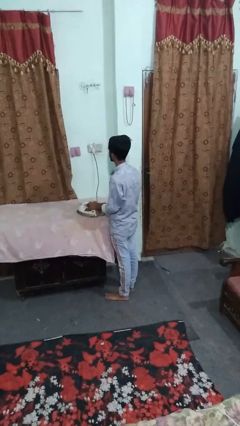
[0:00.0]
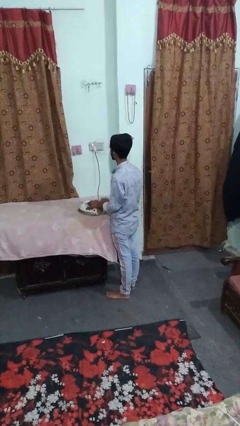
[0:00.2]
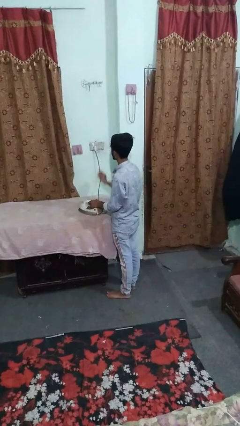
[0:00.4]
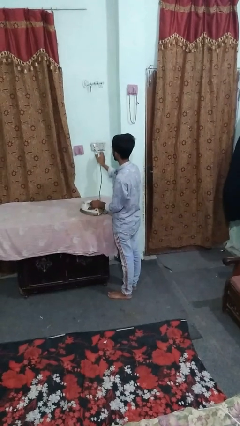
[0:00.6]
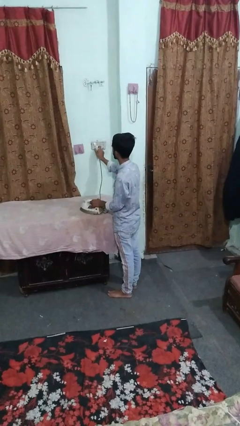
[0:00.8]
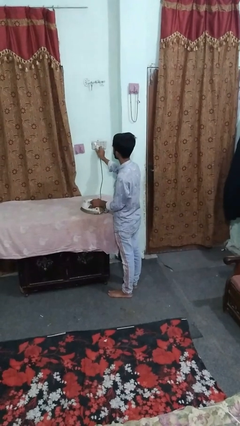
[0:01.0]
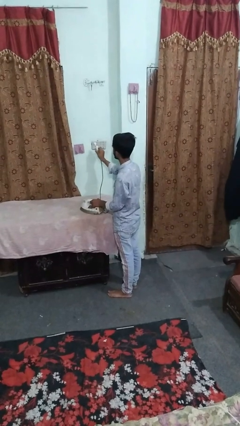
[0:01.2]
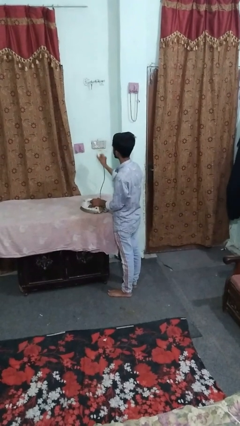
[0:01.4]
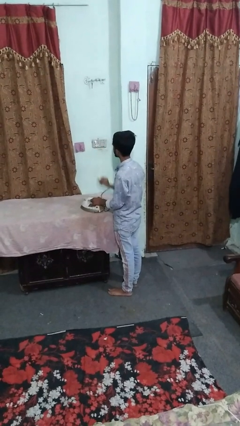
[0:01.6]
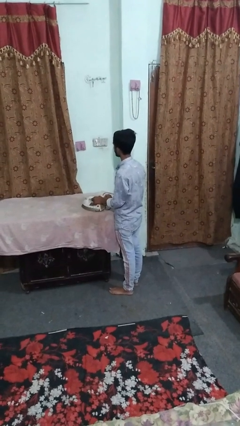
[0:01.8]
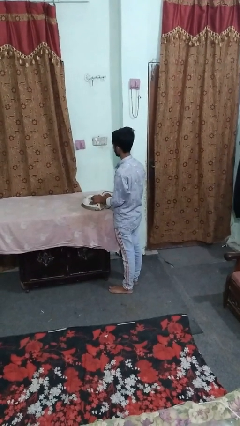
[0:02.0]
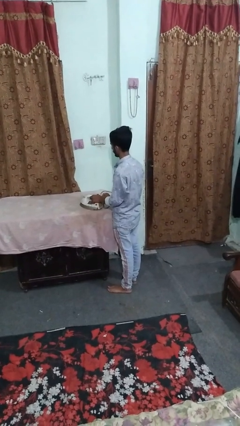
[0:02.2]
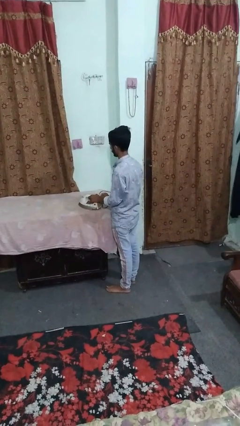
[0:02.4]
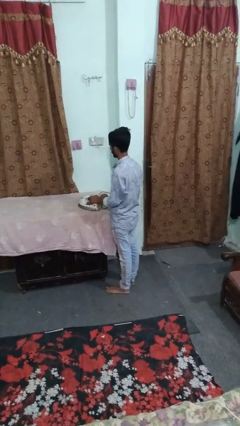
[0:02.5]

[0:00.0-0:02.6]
person unplugs from electrical socket

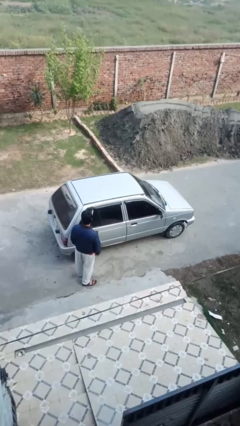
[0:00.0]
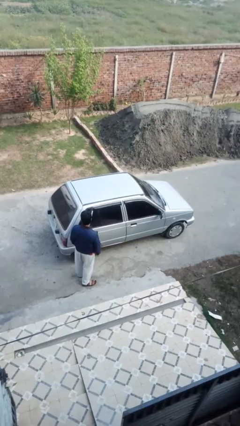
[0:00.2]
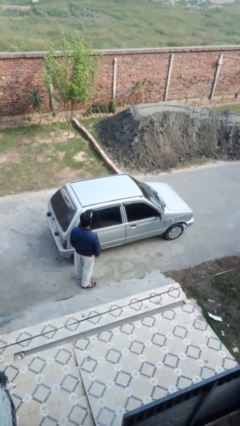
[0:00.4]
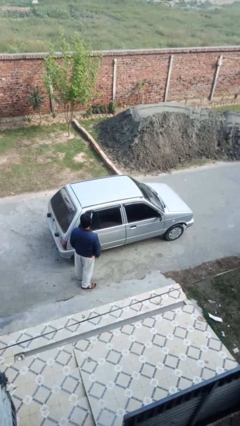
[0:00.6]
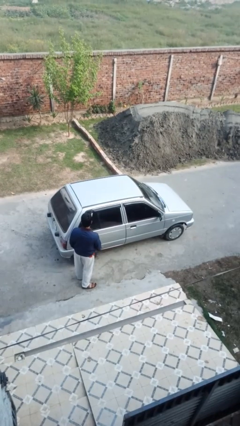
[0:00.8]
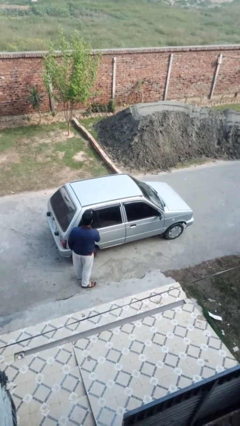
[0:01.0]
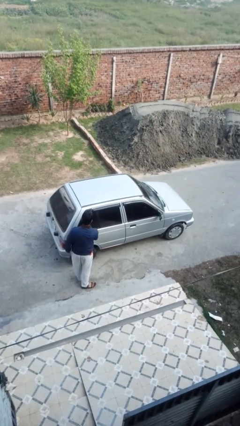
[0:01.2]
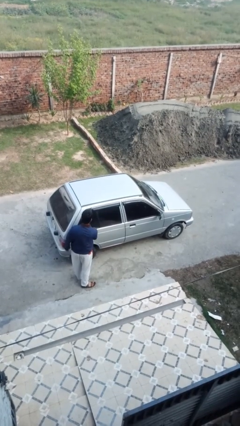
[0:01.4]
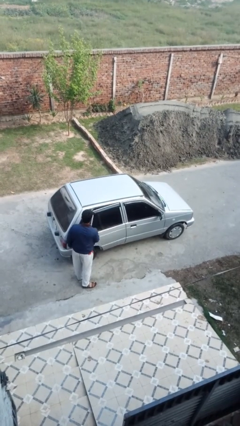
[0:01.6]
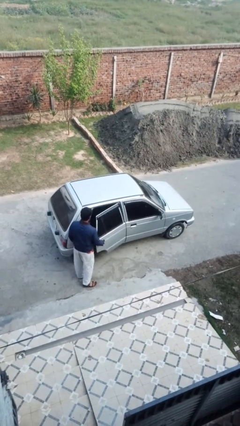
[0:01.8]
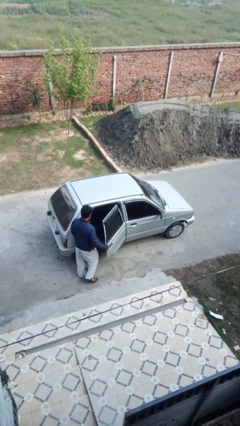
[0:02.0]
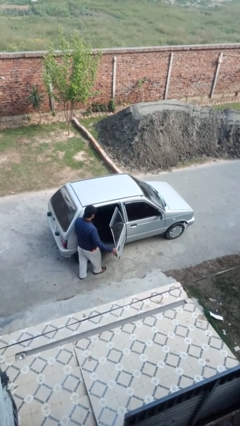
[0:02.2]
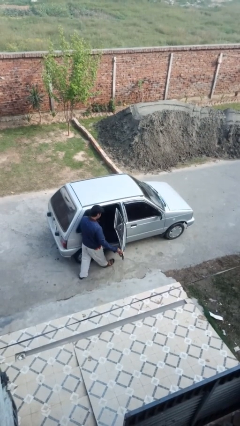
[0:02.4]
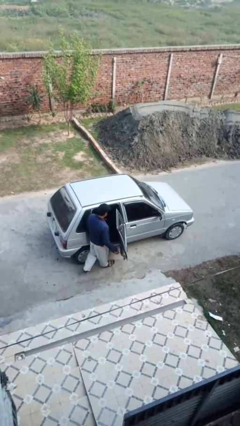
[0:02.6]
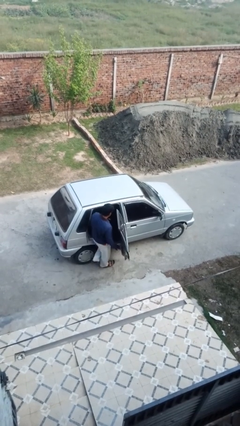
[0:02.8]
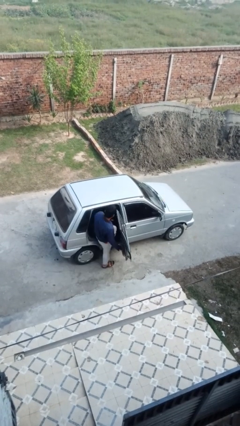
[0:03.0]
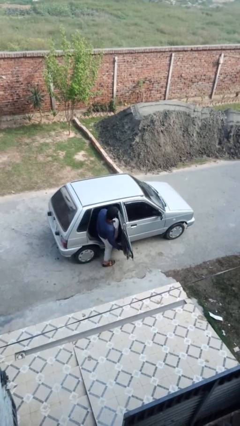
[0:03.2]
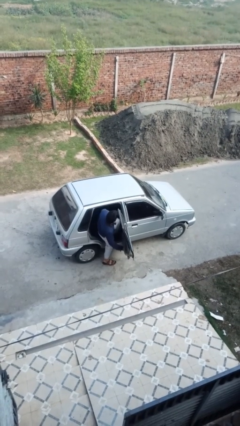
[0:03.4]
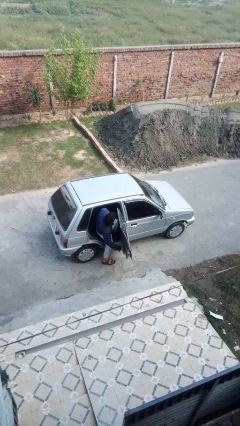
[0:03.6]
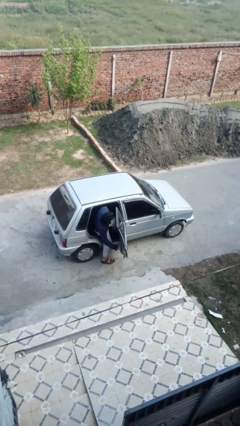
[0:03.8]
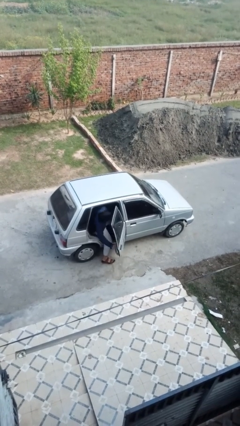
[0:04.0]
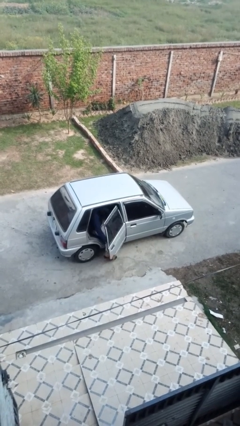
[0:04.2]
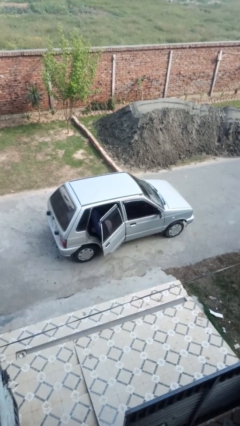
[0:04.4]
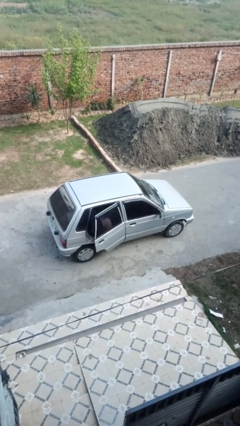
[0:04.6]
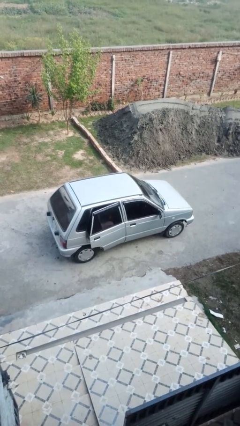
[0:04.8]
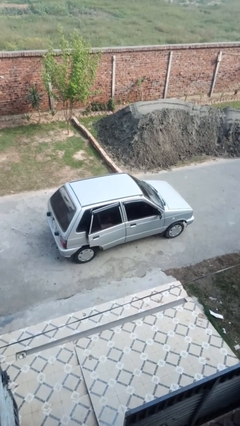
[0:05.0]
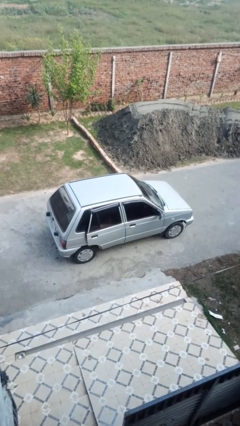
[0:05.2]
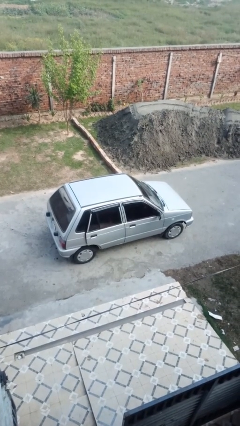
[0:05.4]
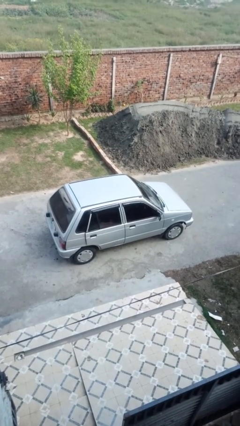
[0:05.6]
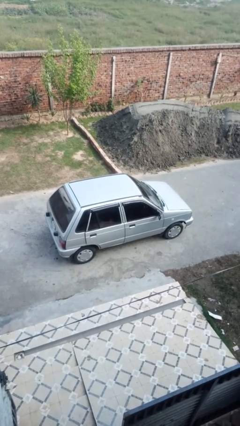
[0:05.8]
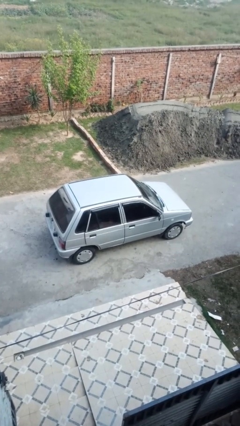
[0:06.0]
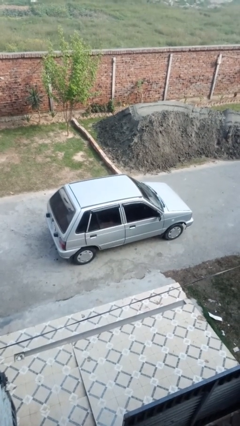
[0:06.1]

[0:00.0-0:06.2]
car picks up person

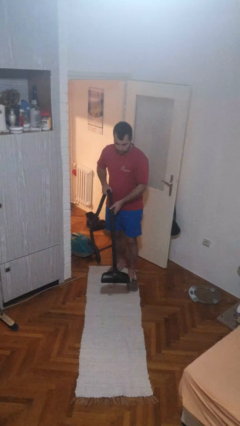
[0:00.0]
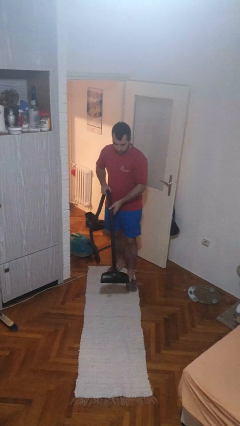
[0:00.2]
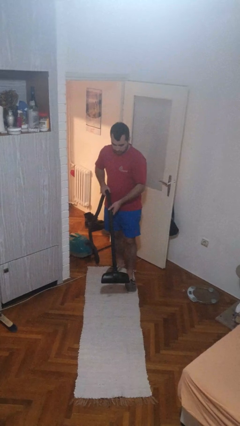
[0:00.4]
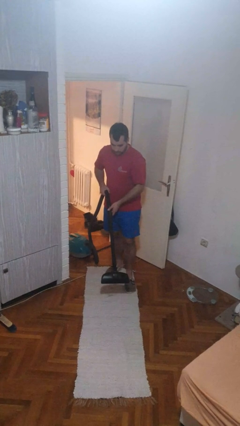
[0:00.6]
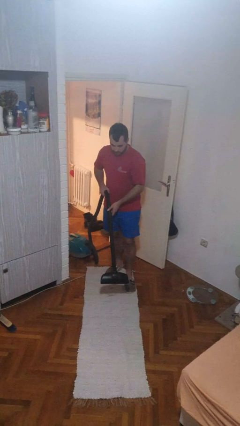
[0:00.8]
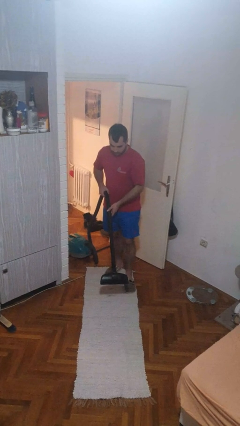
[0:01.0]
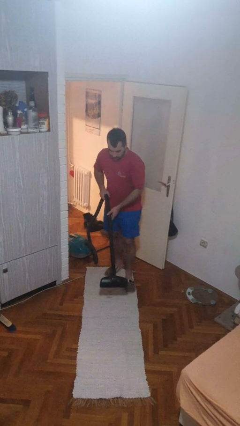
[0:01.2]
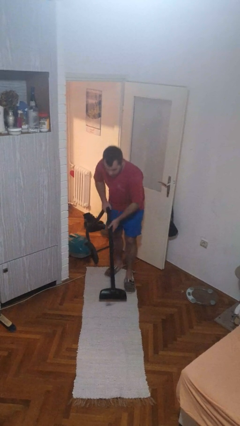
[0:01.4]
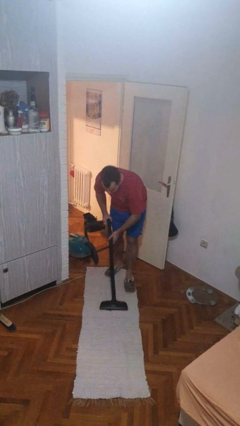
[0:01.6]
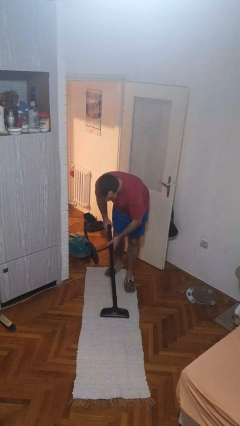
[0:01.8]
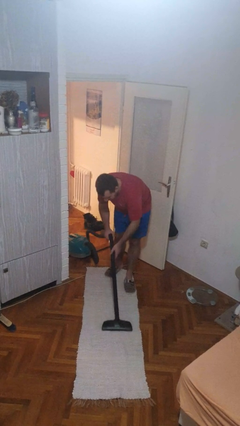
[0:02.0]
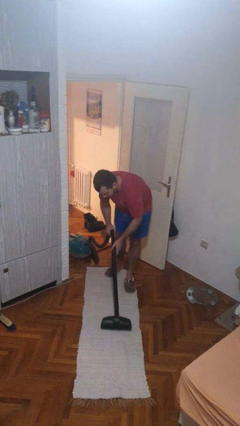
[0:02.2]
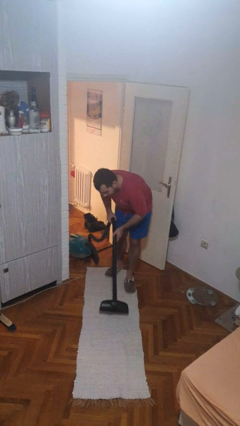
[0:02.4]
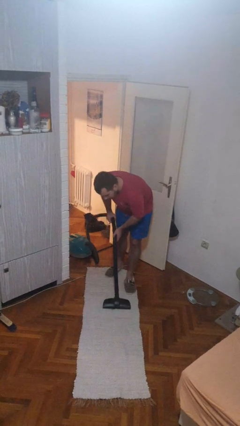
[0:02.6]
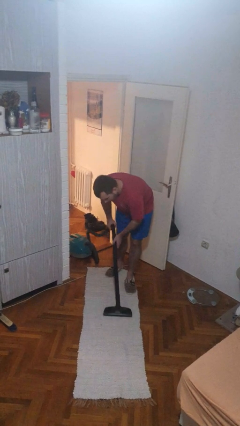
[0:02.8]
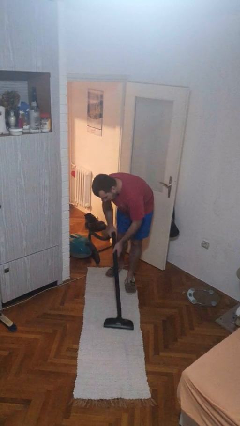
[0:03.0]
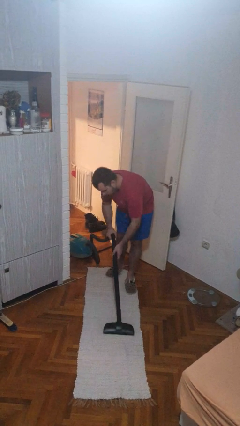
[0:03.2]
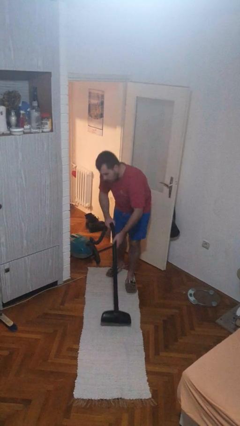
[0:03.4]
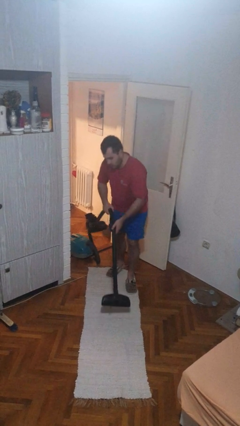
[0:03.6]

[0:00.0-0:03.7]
person vacuums carpet

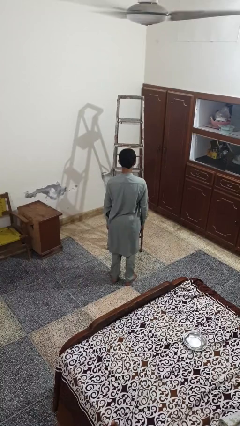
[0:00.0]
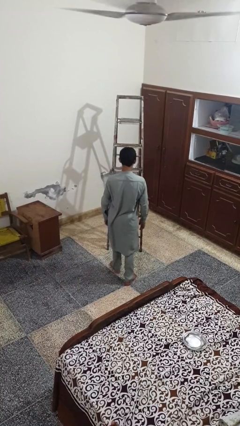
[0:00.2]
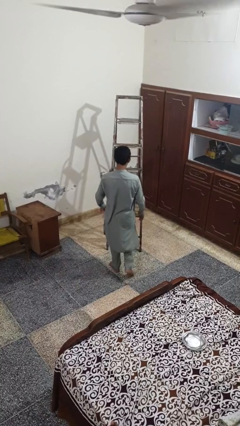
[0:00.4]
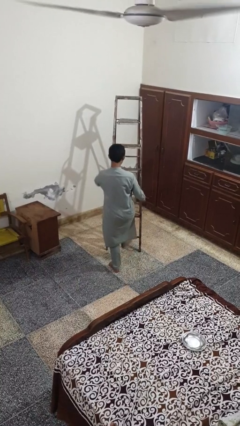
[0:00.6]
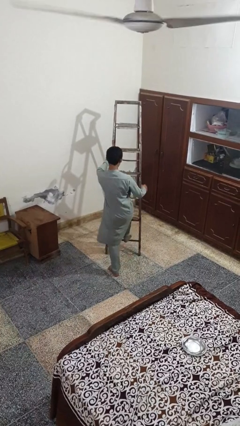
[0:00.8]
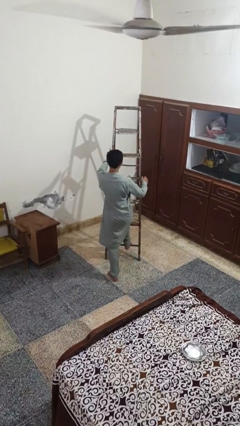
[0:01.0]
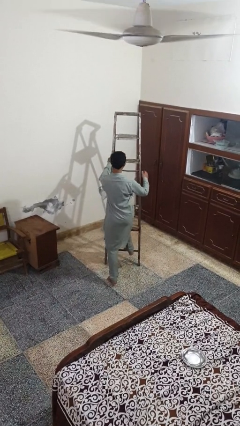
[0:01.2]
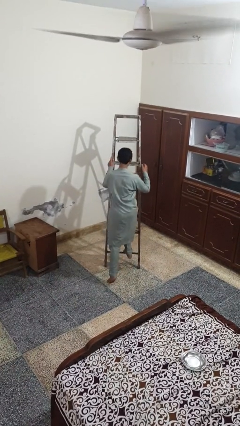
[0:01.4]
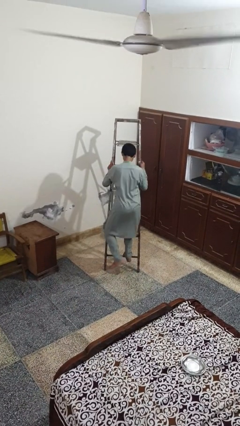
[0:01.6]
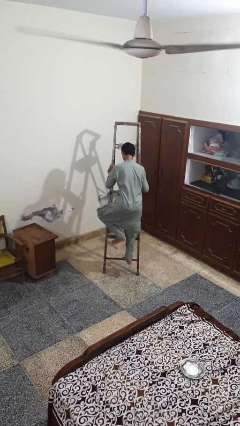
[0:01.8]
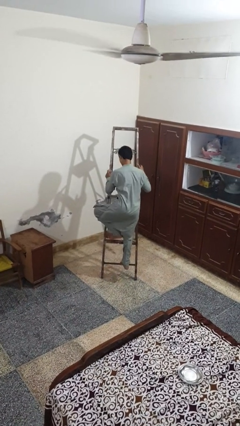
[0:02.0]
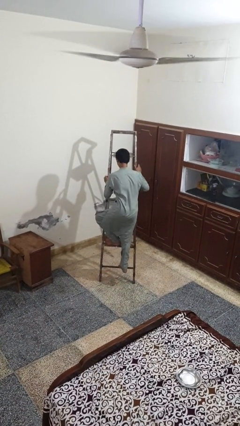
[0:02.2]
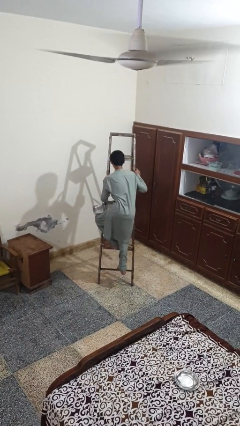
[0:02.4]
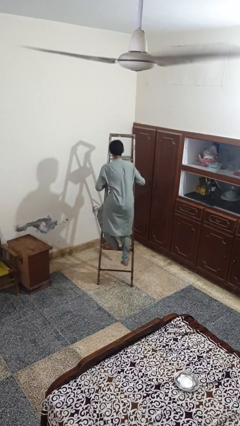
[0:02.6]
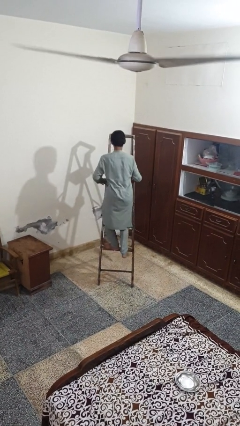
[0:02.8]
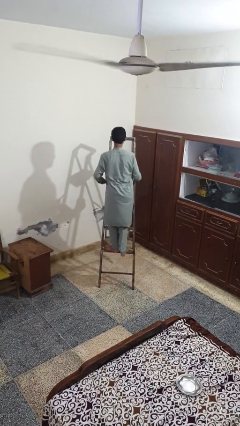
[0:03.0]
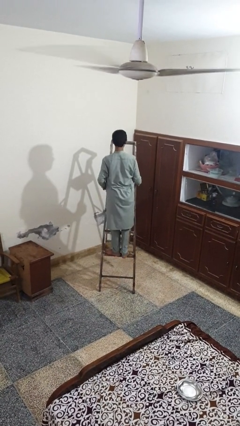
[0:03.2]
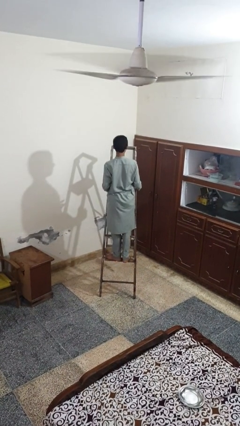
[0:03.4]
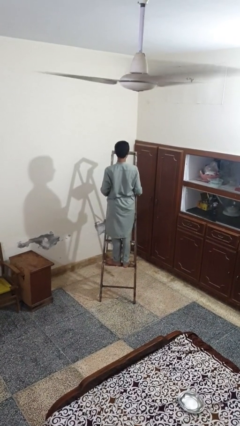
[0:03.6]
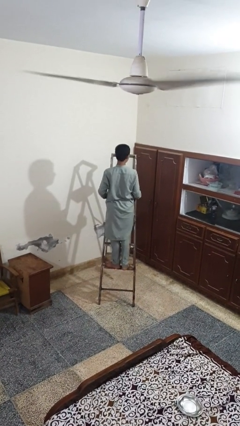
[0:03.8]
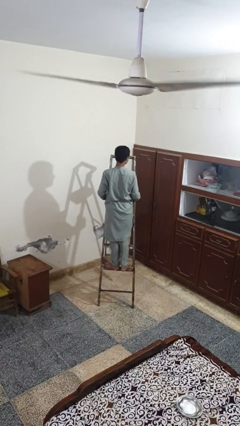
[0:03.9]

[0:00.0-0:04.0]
person climbs up ladder

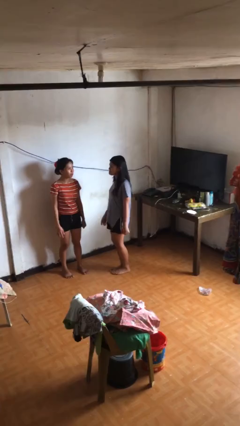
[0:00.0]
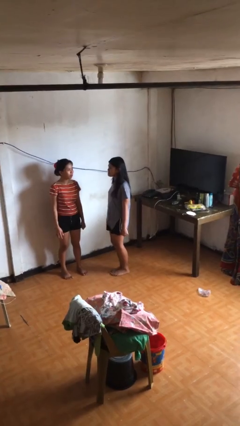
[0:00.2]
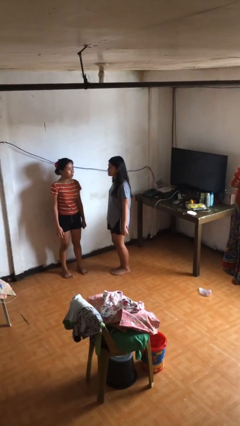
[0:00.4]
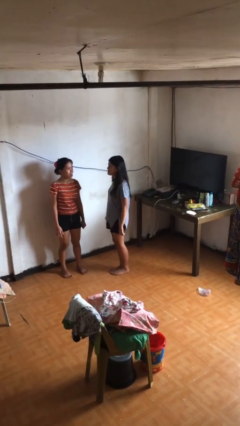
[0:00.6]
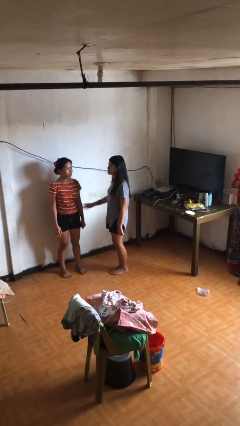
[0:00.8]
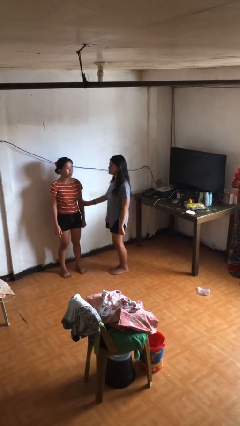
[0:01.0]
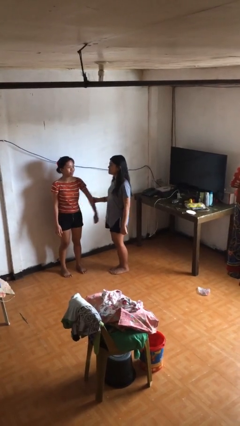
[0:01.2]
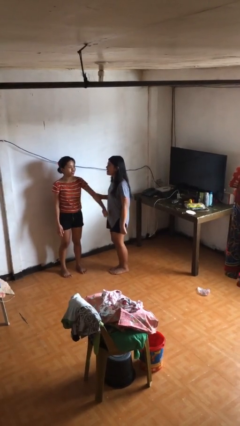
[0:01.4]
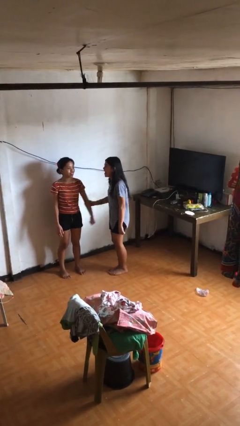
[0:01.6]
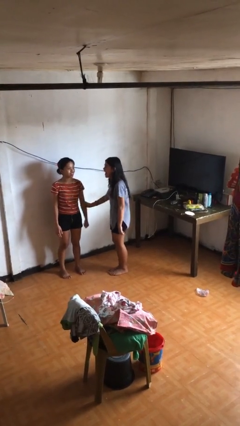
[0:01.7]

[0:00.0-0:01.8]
person grabs person by forearm
